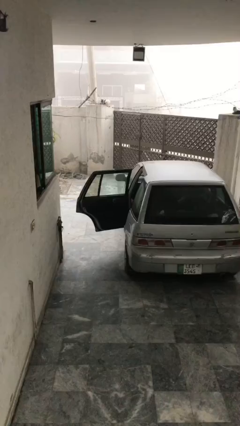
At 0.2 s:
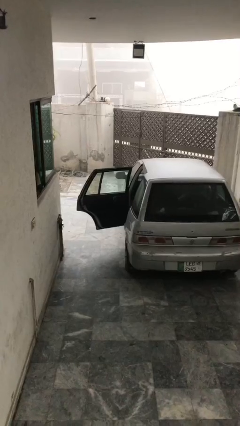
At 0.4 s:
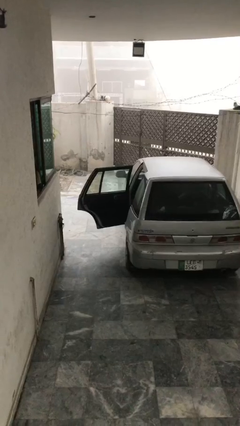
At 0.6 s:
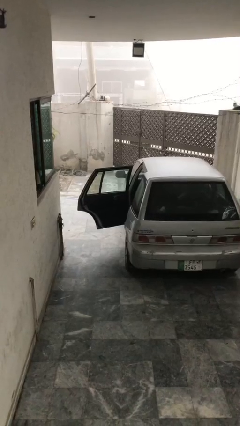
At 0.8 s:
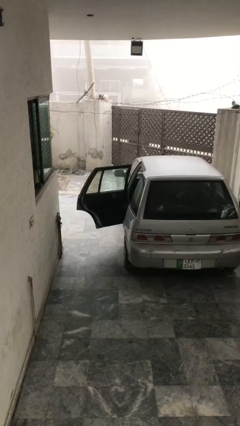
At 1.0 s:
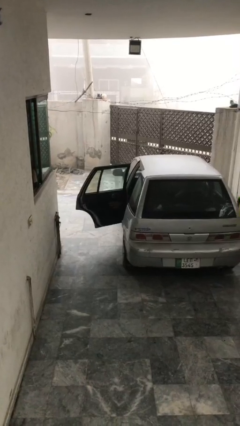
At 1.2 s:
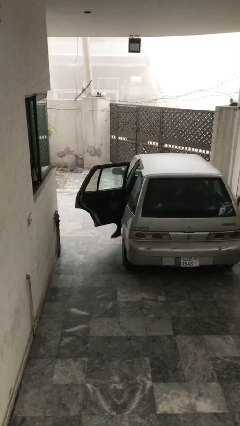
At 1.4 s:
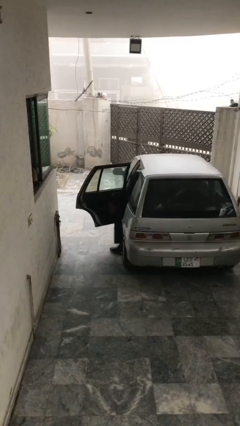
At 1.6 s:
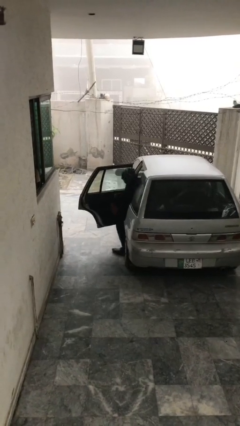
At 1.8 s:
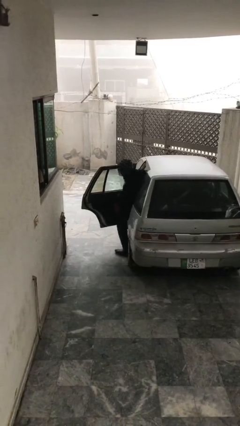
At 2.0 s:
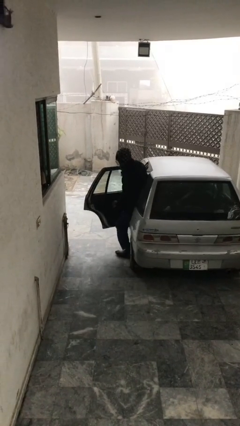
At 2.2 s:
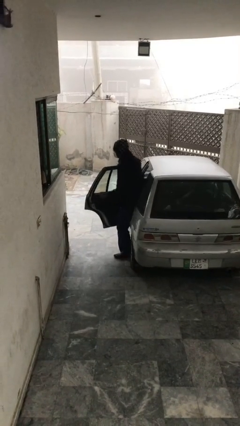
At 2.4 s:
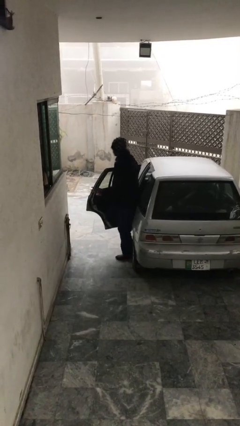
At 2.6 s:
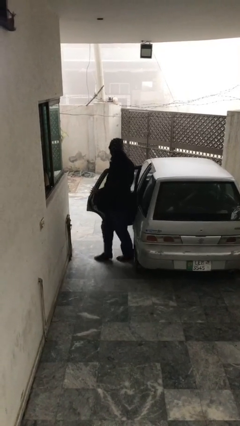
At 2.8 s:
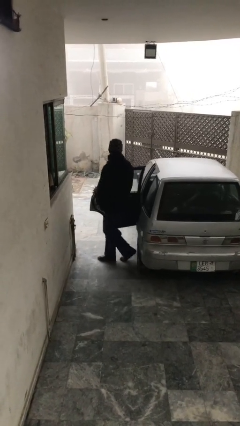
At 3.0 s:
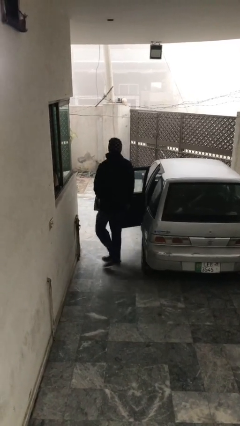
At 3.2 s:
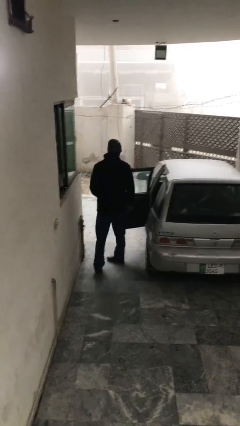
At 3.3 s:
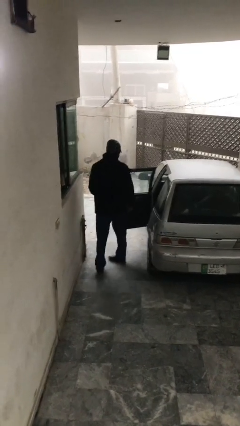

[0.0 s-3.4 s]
person exits car

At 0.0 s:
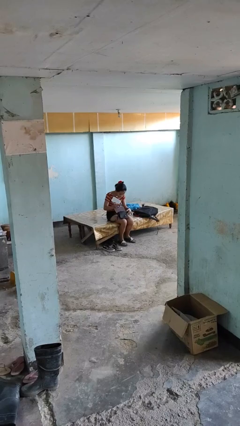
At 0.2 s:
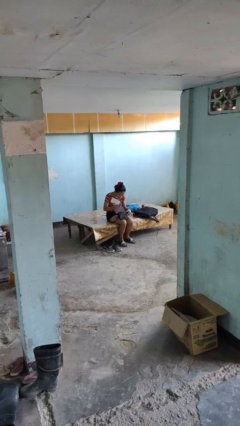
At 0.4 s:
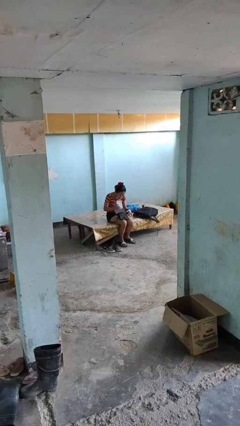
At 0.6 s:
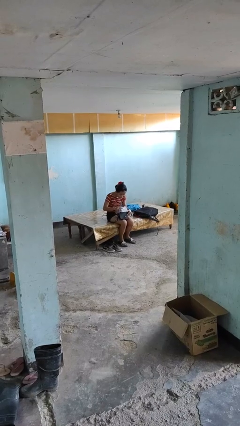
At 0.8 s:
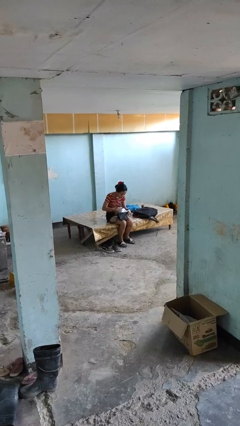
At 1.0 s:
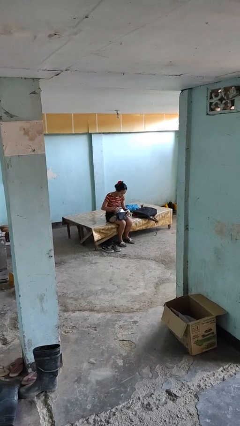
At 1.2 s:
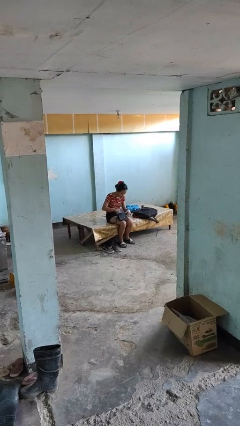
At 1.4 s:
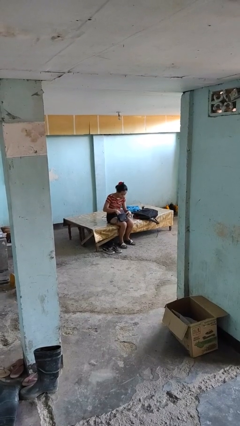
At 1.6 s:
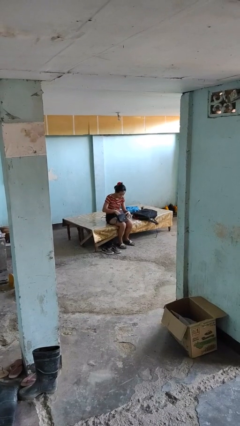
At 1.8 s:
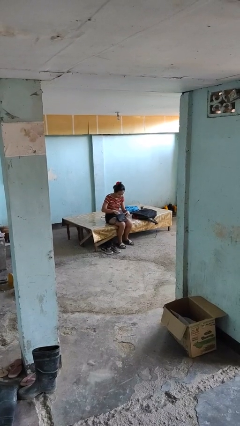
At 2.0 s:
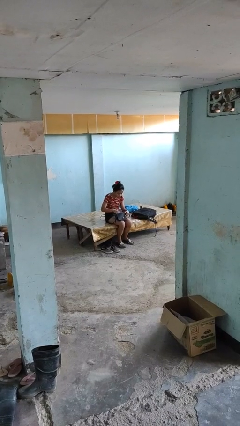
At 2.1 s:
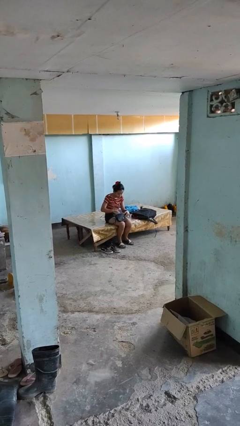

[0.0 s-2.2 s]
person puts object into purse

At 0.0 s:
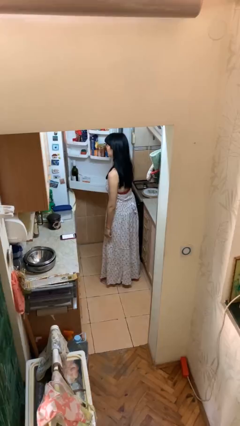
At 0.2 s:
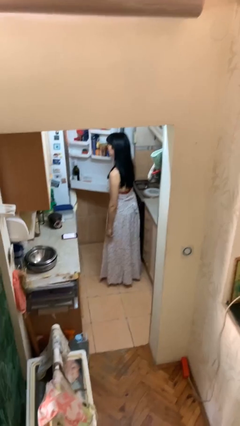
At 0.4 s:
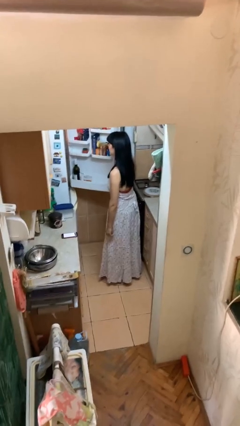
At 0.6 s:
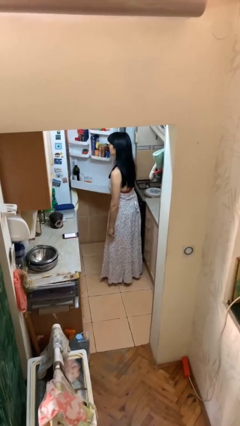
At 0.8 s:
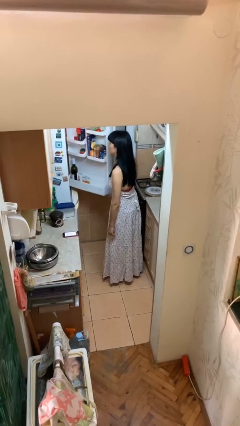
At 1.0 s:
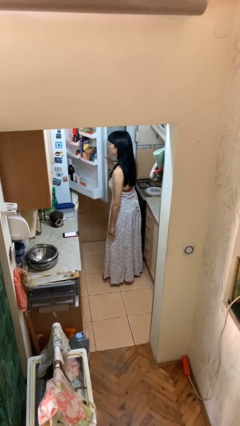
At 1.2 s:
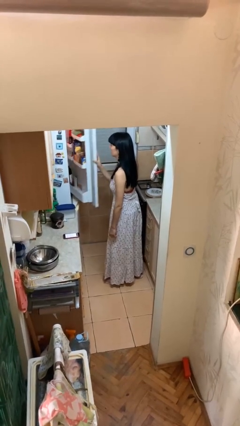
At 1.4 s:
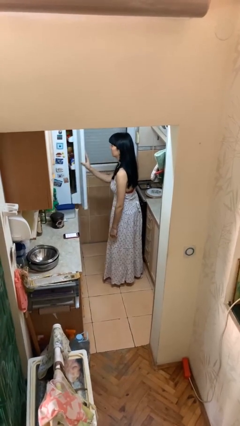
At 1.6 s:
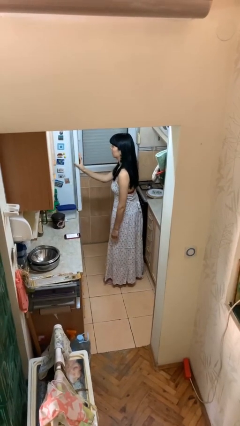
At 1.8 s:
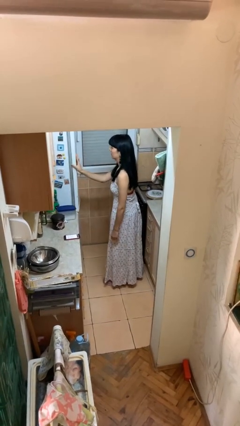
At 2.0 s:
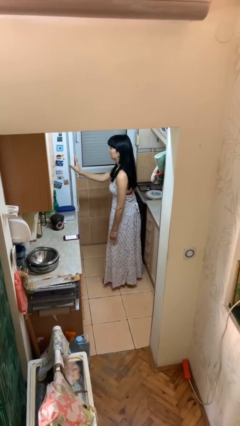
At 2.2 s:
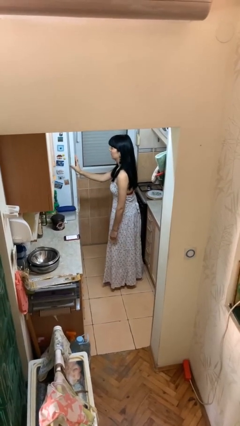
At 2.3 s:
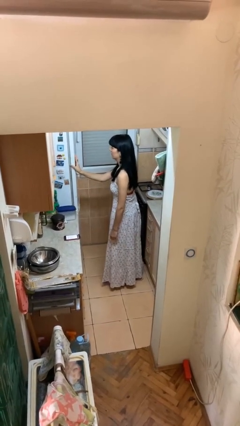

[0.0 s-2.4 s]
person closes refrigerator

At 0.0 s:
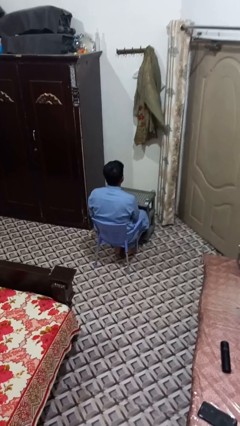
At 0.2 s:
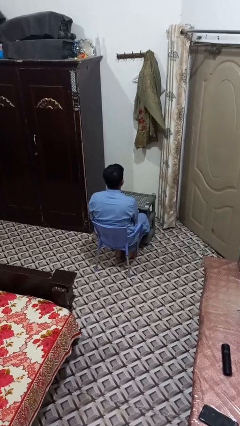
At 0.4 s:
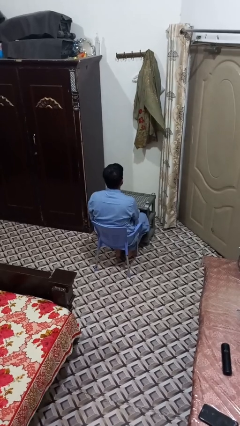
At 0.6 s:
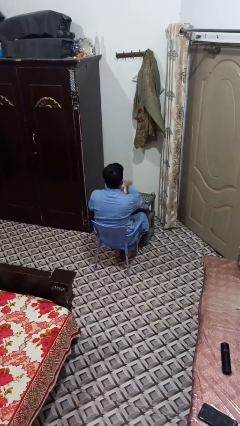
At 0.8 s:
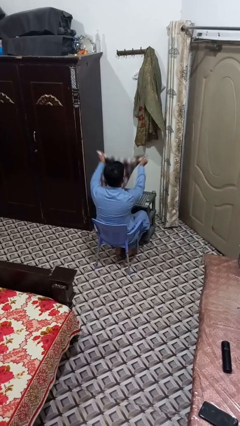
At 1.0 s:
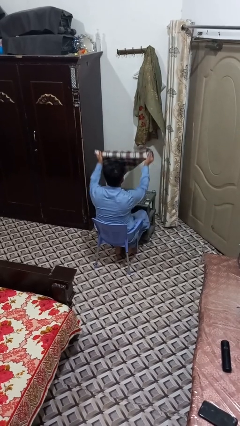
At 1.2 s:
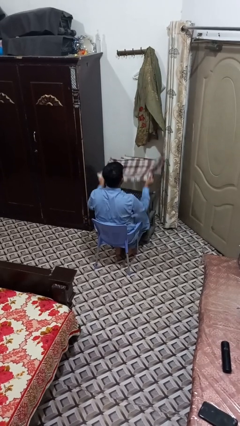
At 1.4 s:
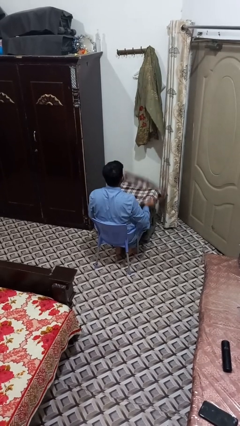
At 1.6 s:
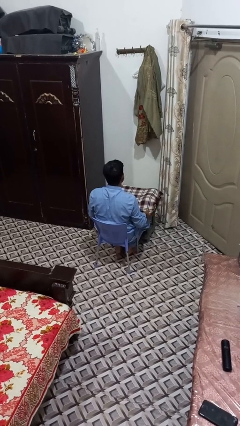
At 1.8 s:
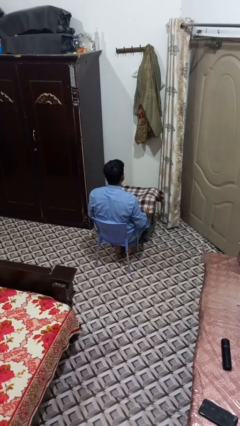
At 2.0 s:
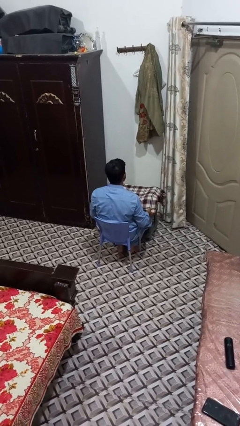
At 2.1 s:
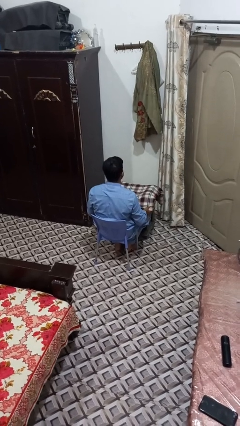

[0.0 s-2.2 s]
person spreads tablecloth

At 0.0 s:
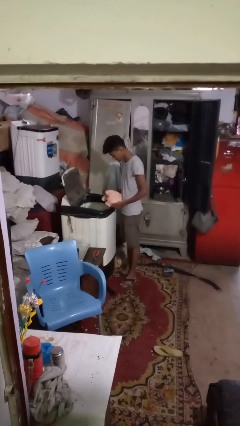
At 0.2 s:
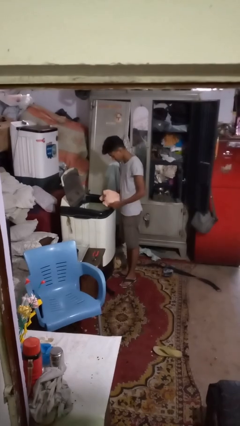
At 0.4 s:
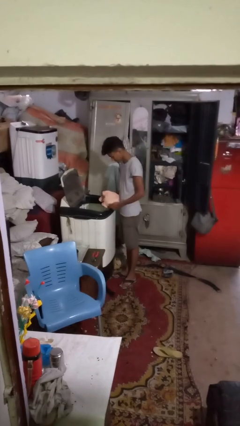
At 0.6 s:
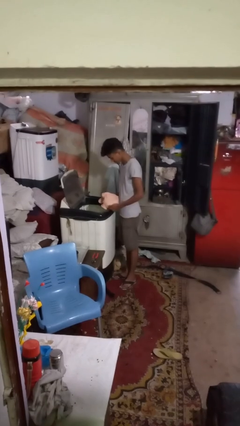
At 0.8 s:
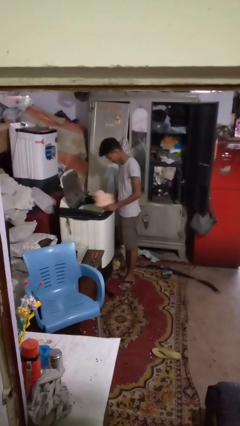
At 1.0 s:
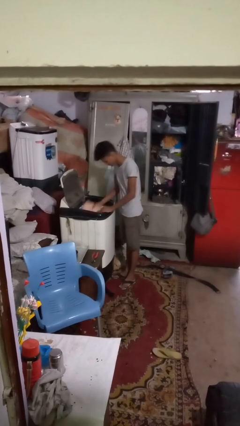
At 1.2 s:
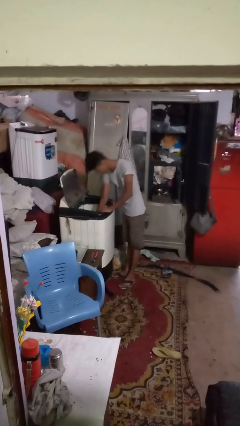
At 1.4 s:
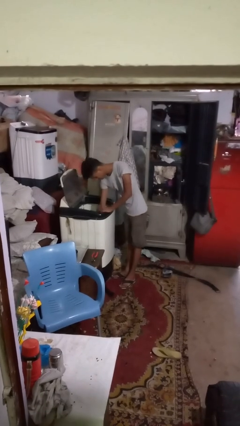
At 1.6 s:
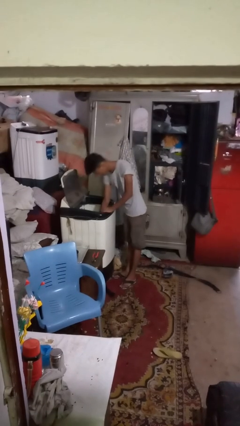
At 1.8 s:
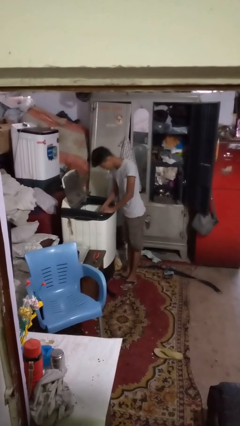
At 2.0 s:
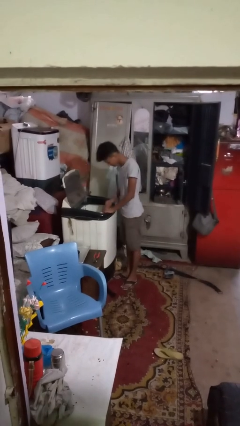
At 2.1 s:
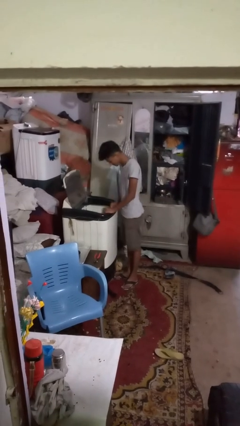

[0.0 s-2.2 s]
person loads clotheswasher

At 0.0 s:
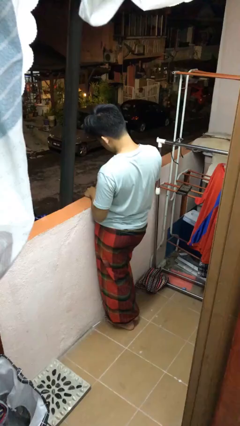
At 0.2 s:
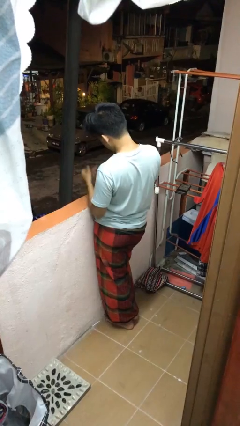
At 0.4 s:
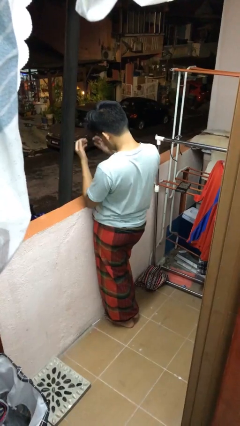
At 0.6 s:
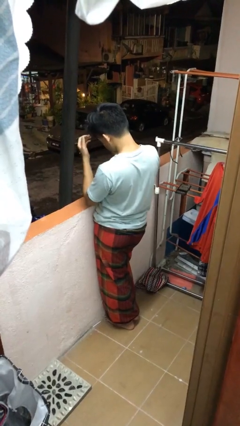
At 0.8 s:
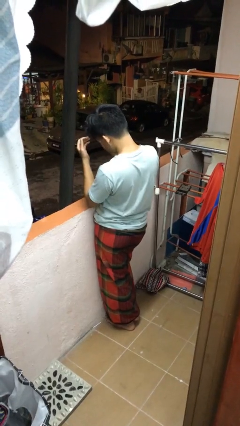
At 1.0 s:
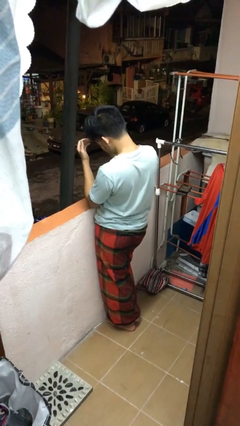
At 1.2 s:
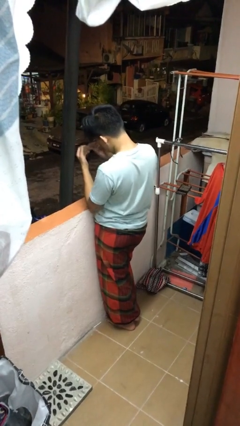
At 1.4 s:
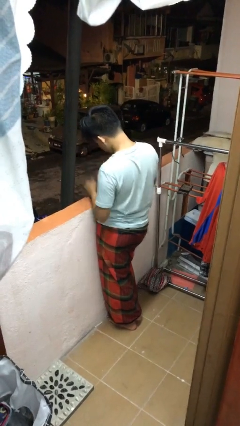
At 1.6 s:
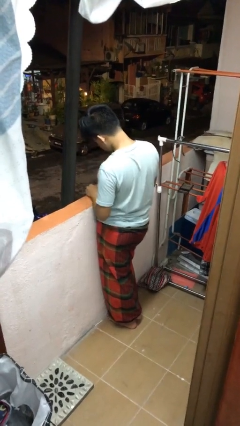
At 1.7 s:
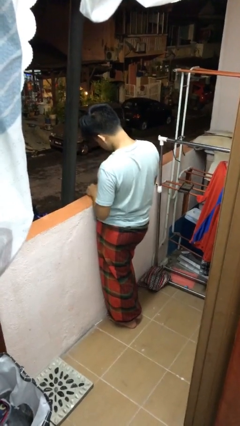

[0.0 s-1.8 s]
person prays

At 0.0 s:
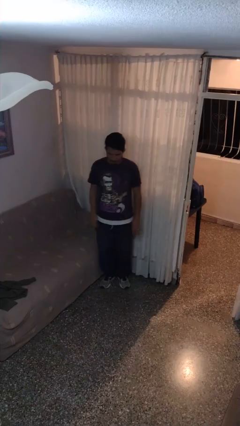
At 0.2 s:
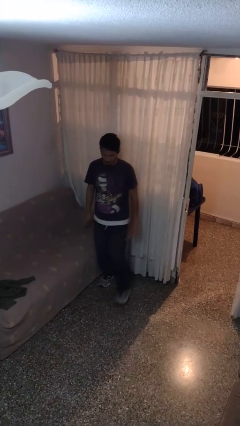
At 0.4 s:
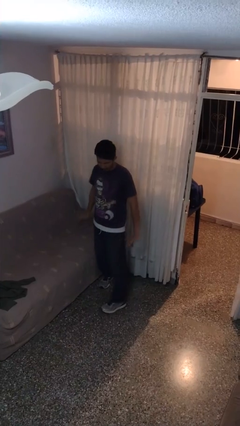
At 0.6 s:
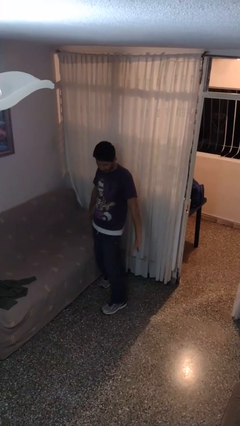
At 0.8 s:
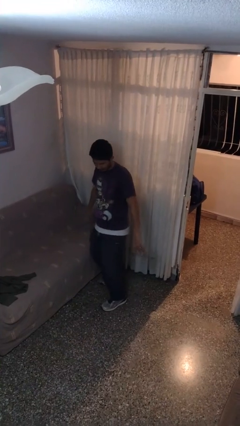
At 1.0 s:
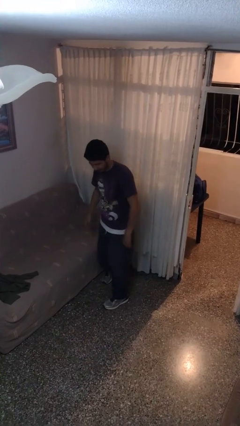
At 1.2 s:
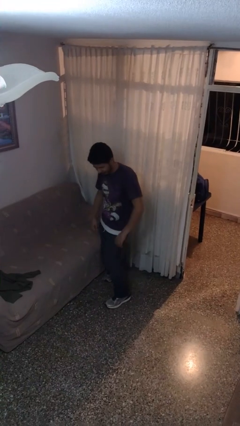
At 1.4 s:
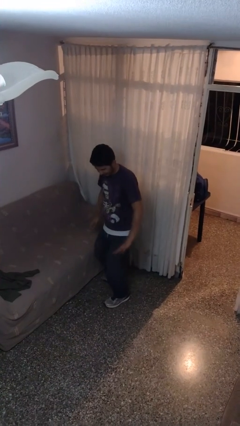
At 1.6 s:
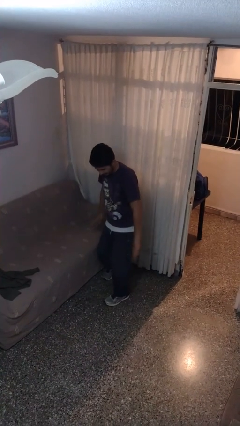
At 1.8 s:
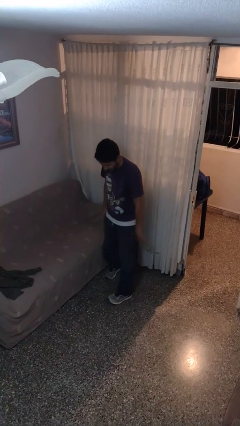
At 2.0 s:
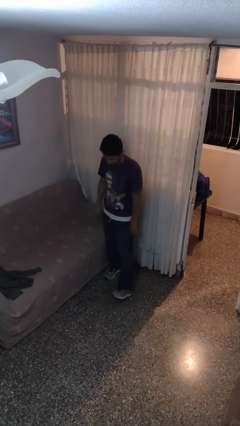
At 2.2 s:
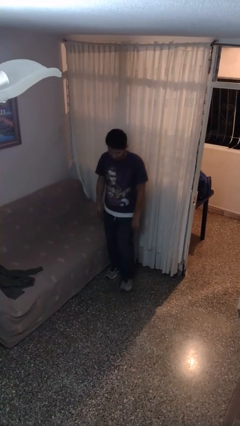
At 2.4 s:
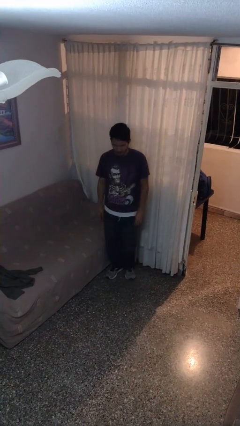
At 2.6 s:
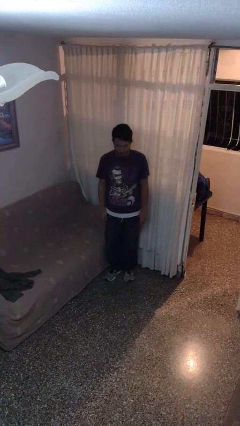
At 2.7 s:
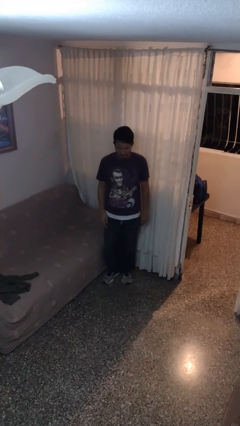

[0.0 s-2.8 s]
person dances in place

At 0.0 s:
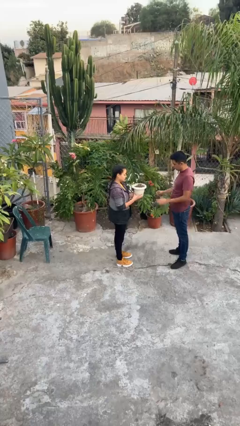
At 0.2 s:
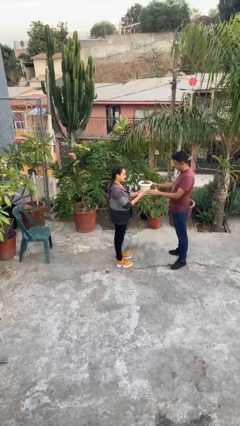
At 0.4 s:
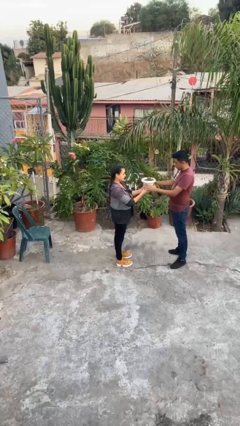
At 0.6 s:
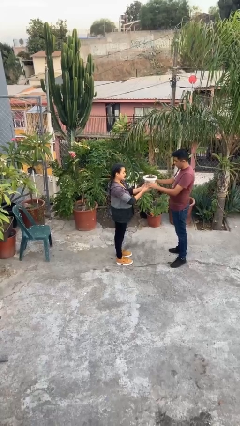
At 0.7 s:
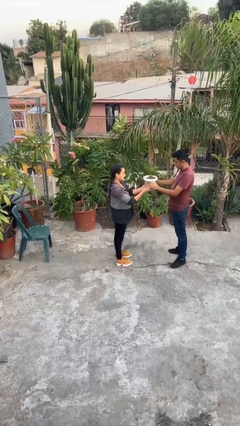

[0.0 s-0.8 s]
person transfers object to person
